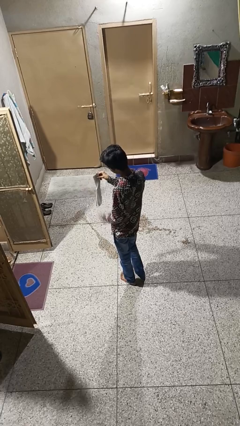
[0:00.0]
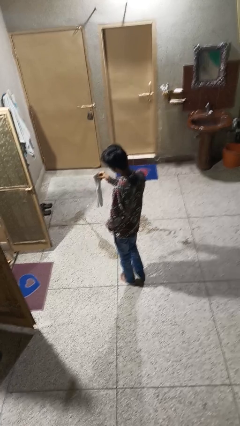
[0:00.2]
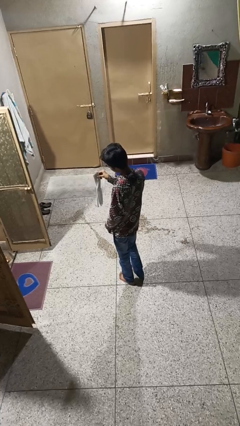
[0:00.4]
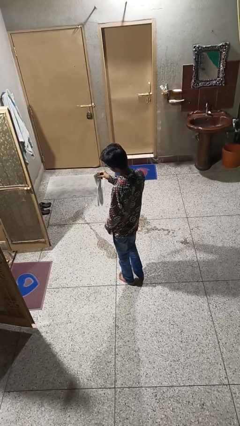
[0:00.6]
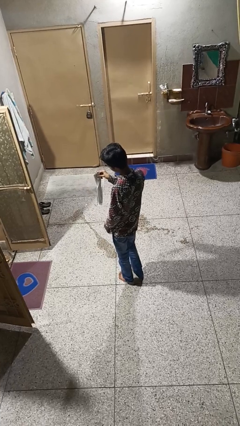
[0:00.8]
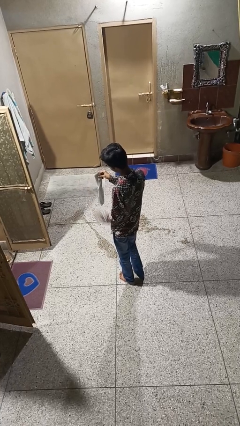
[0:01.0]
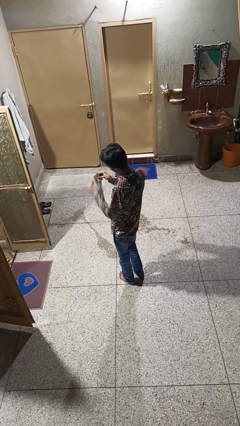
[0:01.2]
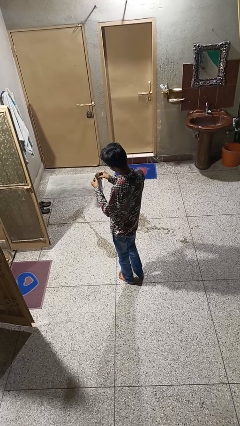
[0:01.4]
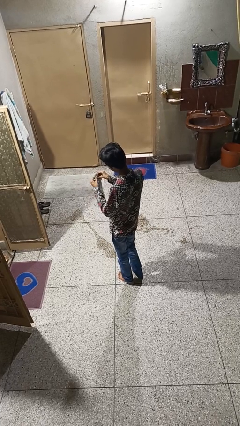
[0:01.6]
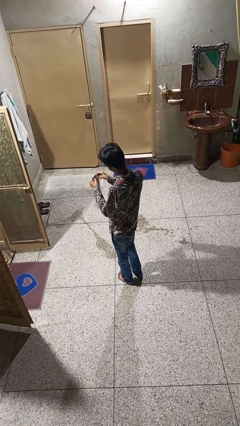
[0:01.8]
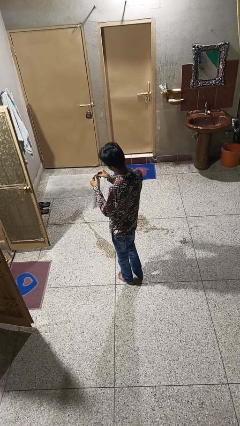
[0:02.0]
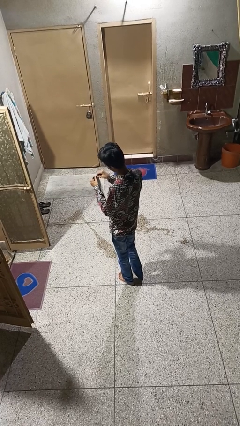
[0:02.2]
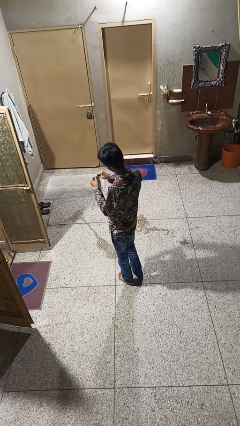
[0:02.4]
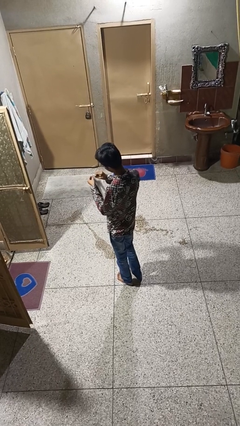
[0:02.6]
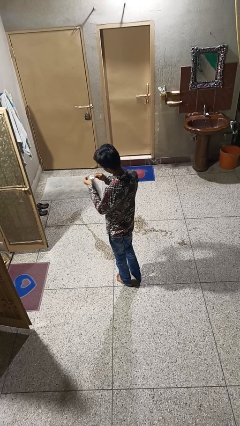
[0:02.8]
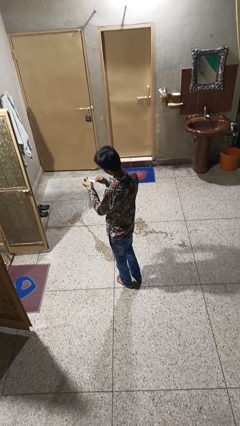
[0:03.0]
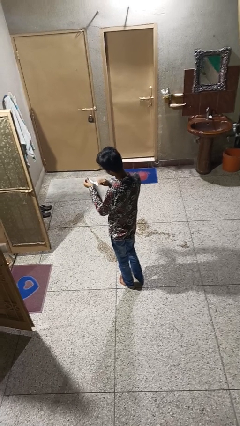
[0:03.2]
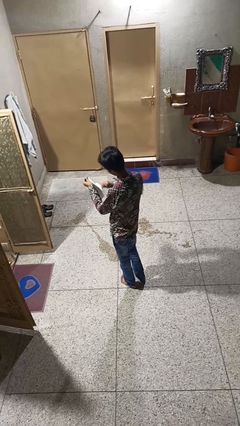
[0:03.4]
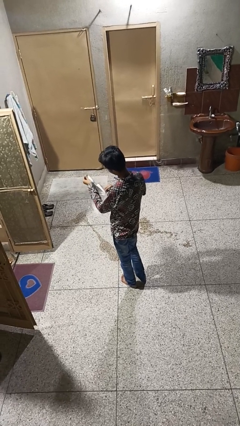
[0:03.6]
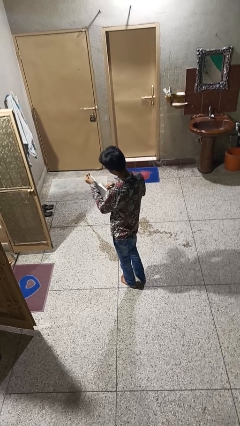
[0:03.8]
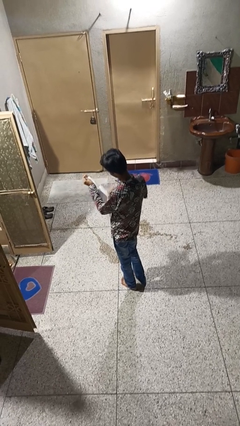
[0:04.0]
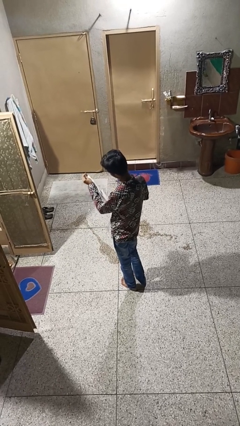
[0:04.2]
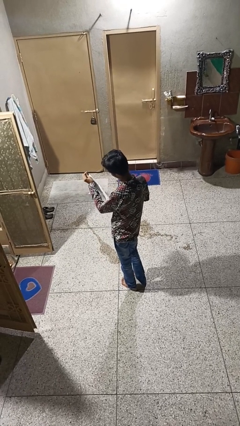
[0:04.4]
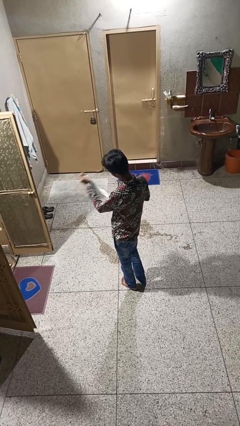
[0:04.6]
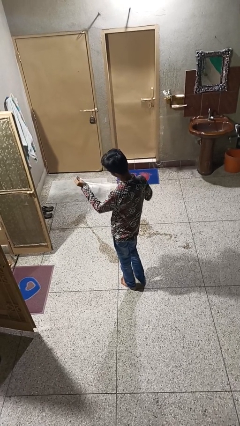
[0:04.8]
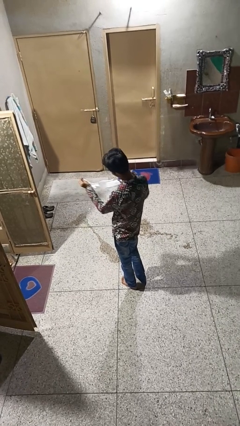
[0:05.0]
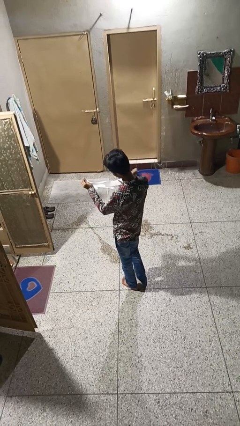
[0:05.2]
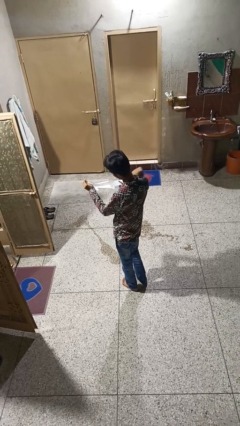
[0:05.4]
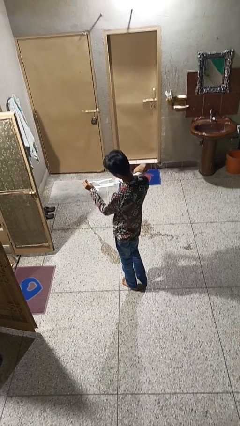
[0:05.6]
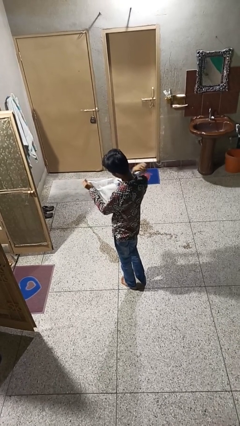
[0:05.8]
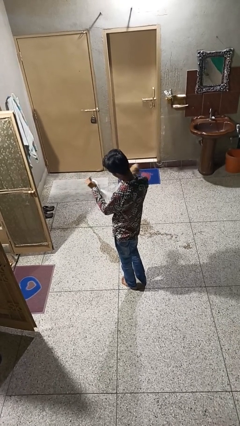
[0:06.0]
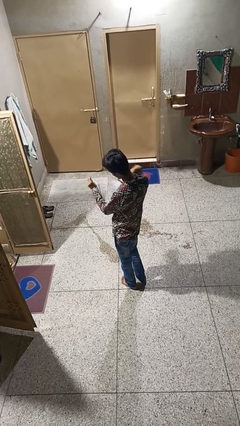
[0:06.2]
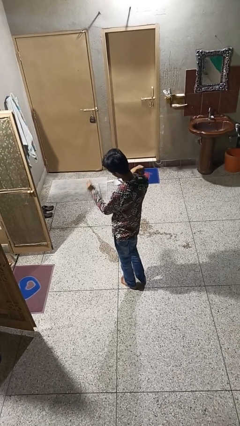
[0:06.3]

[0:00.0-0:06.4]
person tears paper

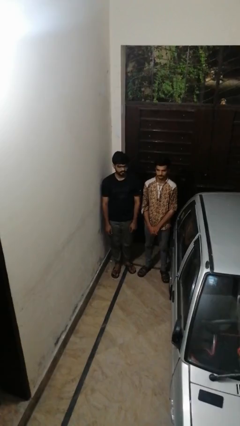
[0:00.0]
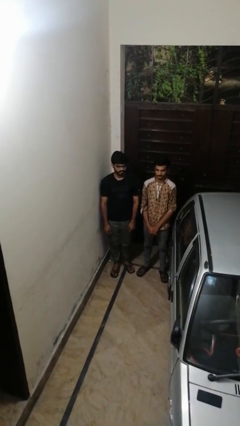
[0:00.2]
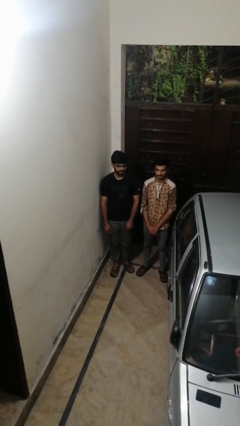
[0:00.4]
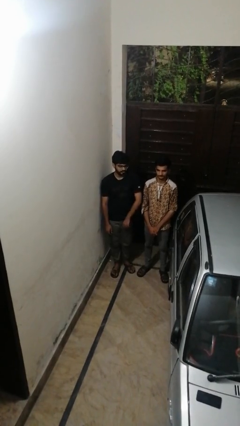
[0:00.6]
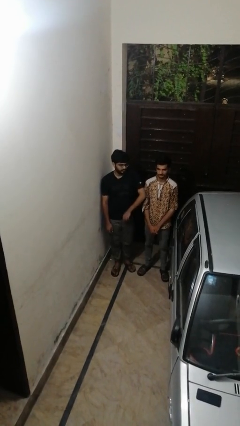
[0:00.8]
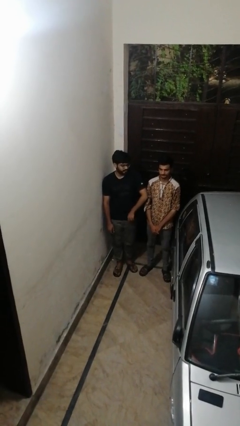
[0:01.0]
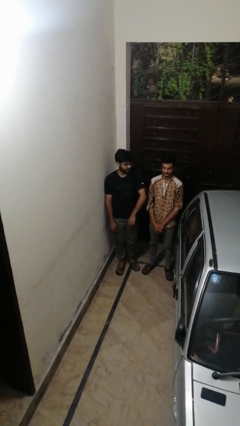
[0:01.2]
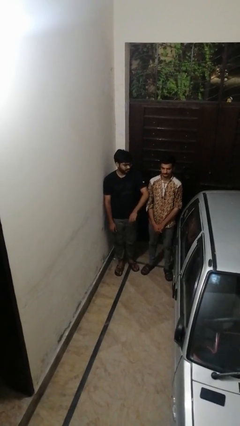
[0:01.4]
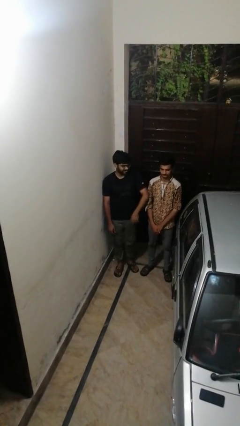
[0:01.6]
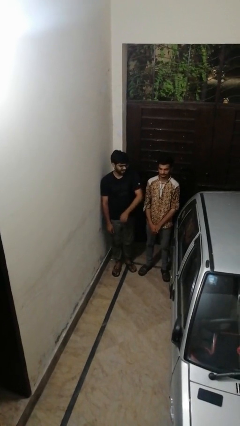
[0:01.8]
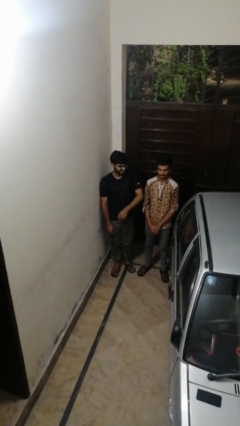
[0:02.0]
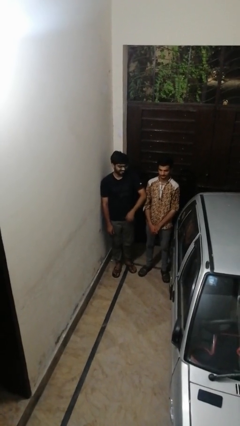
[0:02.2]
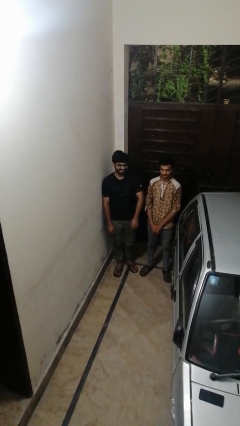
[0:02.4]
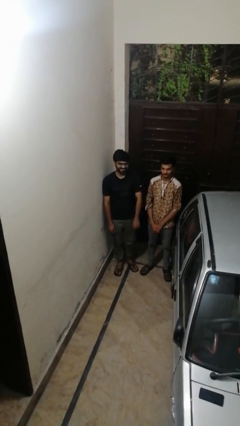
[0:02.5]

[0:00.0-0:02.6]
person nudges person with elbow

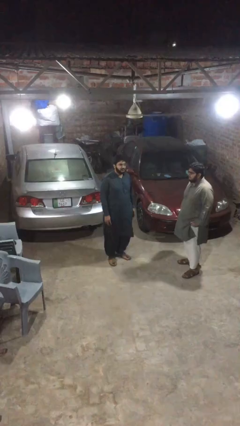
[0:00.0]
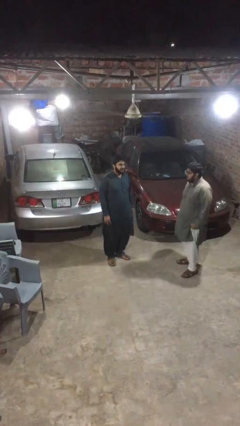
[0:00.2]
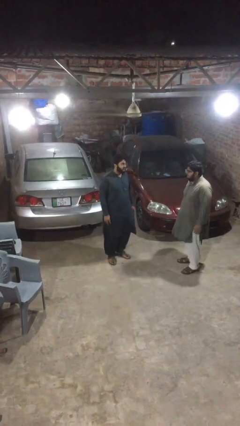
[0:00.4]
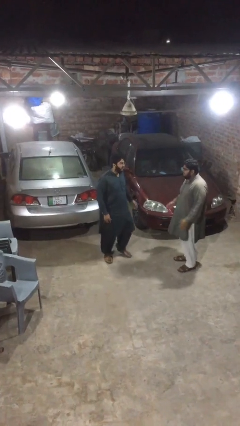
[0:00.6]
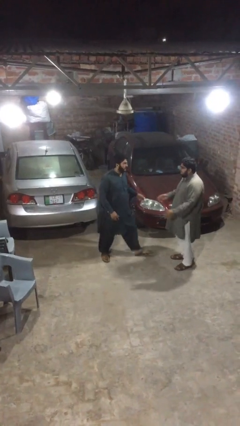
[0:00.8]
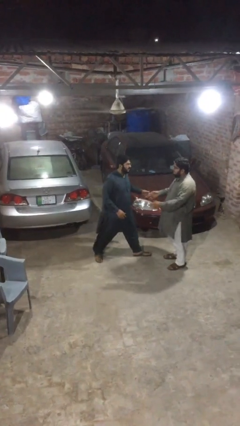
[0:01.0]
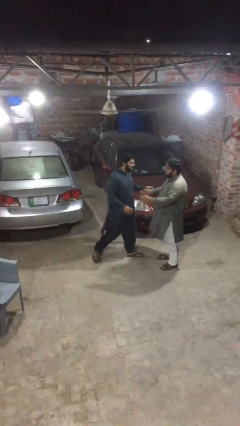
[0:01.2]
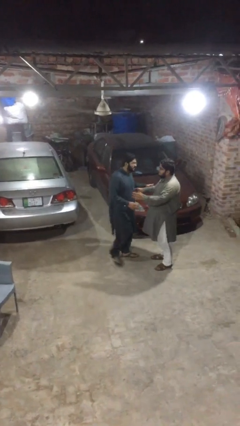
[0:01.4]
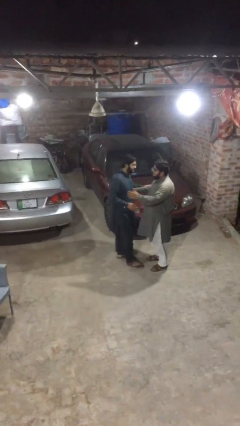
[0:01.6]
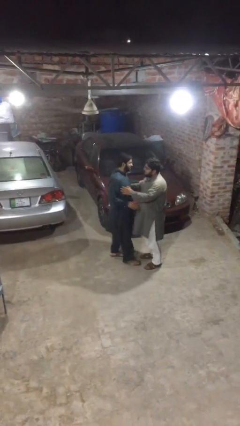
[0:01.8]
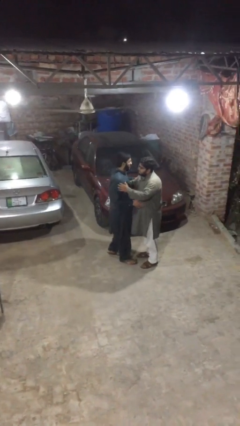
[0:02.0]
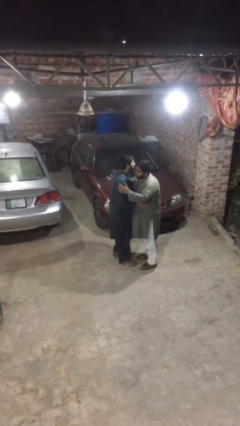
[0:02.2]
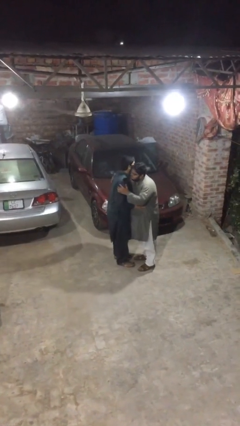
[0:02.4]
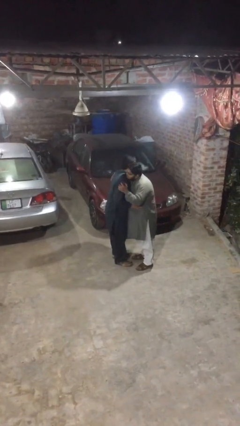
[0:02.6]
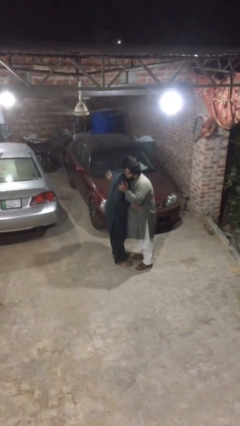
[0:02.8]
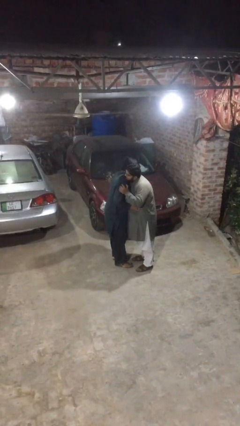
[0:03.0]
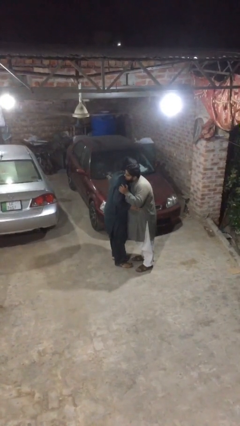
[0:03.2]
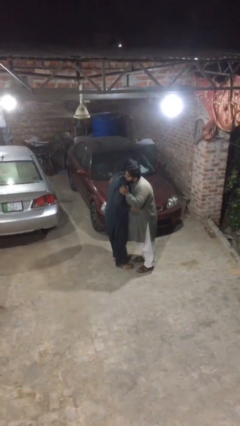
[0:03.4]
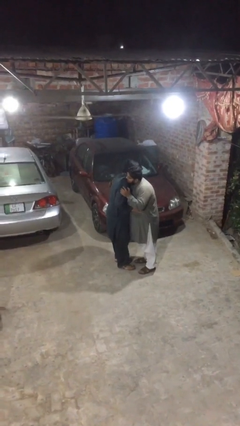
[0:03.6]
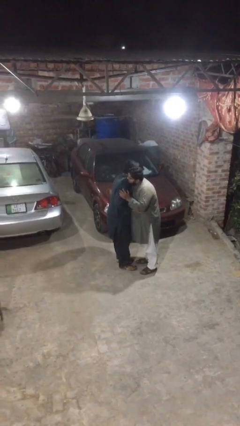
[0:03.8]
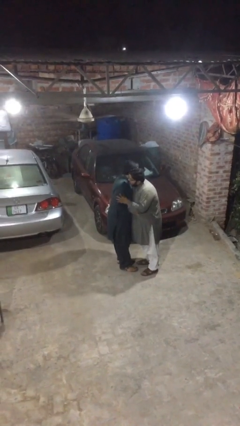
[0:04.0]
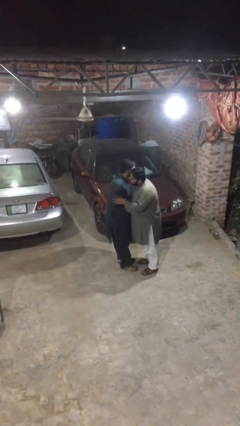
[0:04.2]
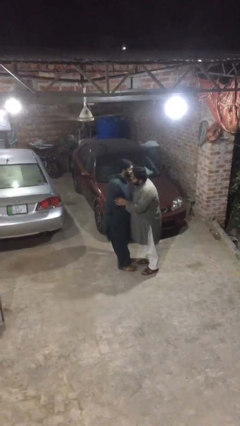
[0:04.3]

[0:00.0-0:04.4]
person embraces person

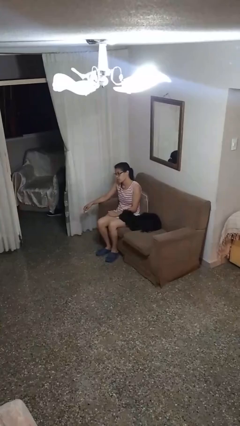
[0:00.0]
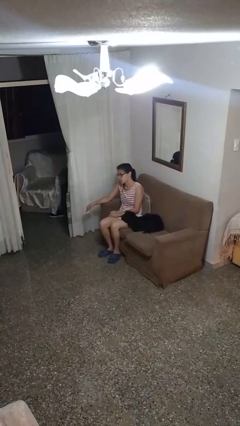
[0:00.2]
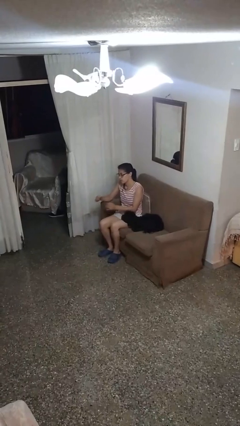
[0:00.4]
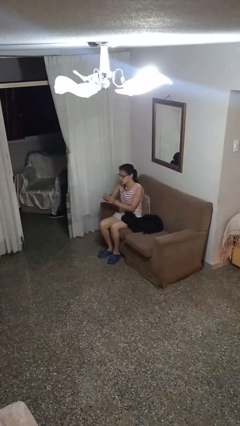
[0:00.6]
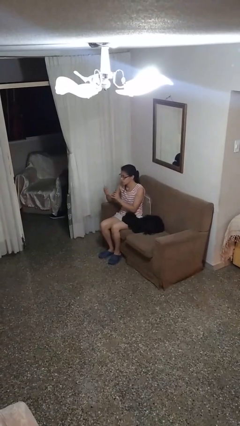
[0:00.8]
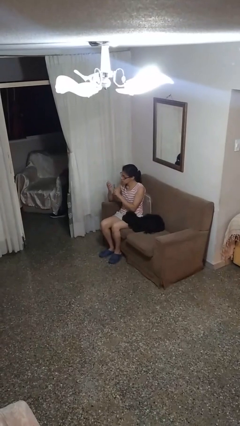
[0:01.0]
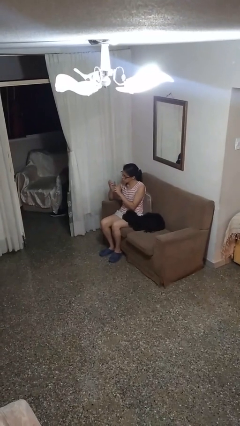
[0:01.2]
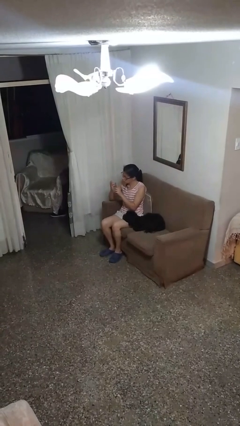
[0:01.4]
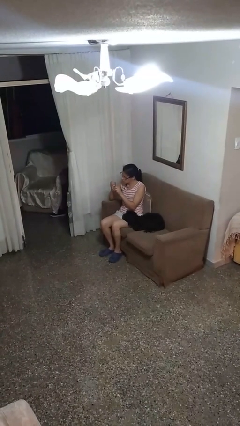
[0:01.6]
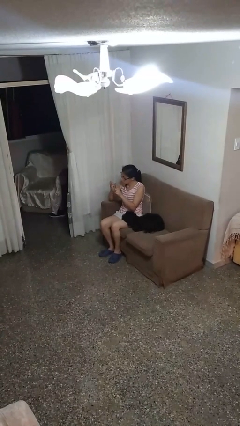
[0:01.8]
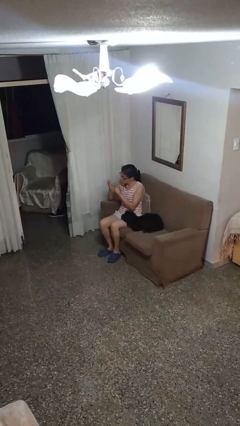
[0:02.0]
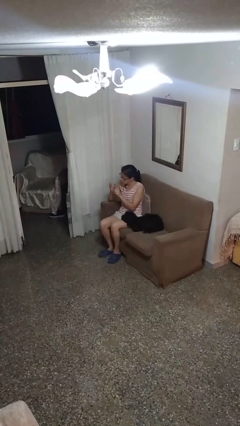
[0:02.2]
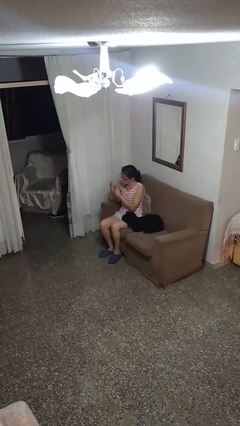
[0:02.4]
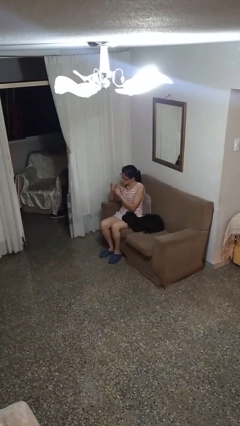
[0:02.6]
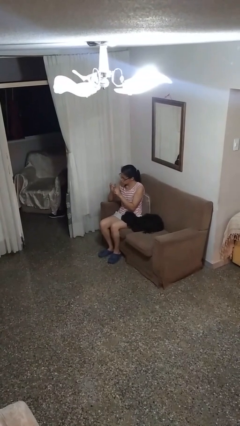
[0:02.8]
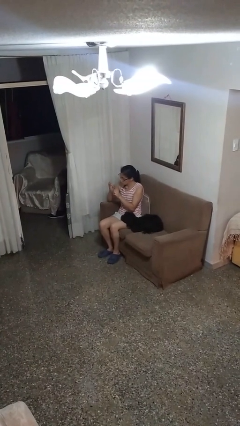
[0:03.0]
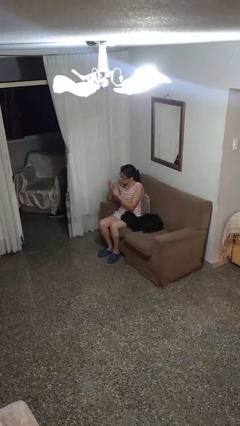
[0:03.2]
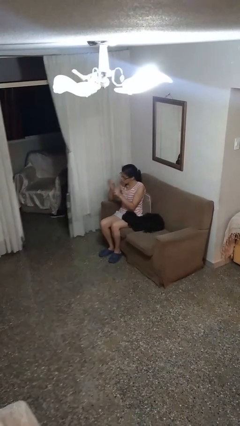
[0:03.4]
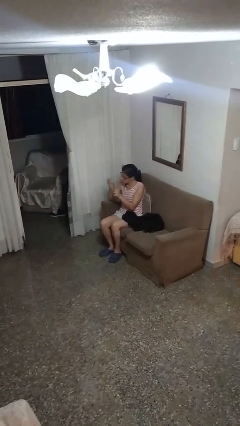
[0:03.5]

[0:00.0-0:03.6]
person files fingernails

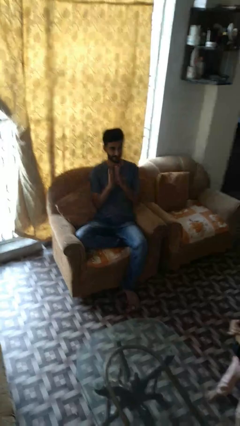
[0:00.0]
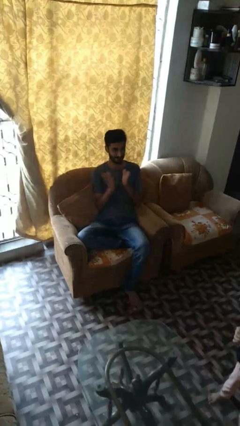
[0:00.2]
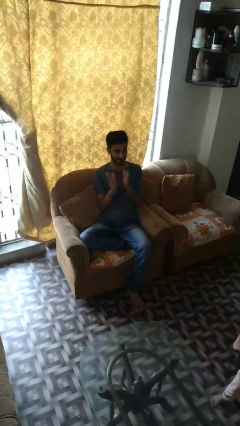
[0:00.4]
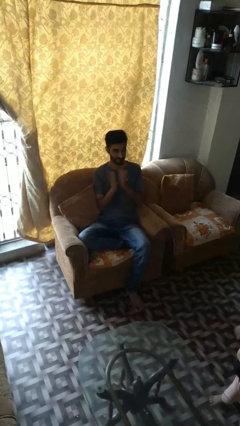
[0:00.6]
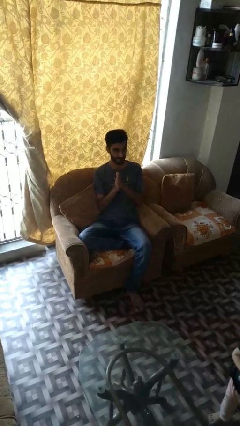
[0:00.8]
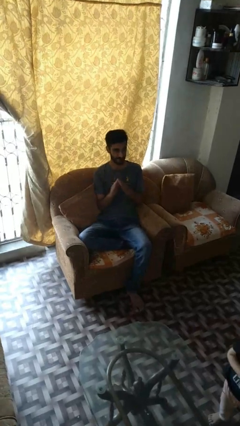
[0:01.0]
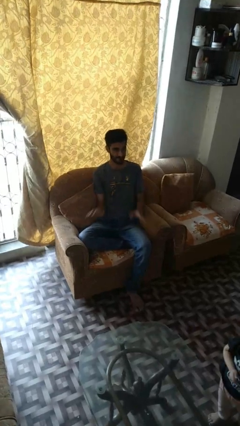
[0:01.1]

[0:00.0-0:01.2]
person claps hands
